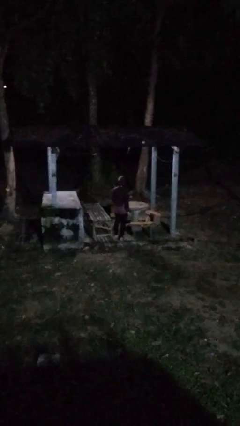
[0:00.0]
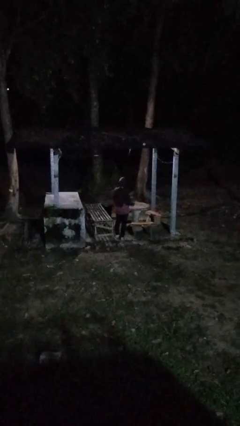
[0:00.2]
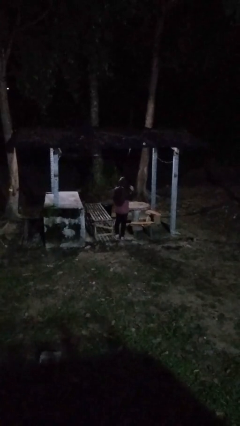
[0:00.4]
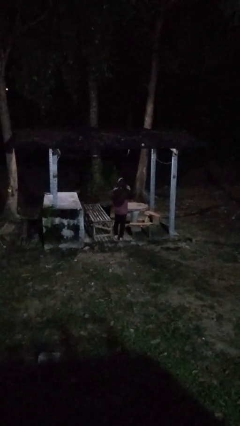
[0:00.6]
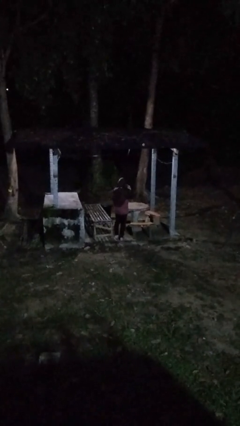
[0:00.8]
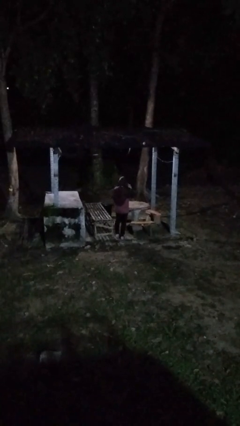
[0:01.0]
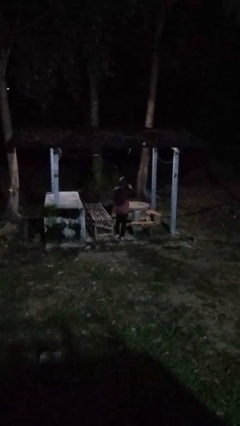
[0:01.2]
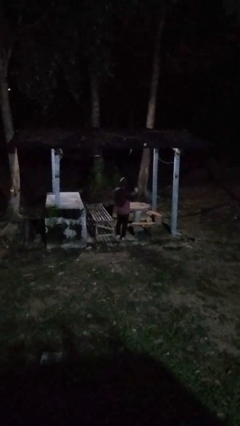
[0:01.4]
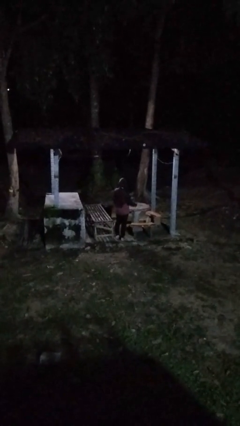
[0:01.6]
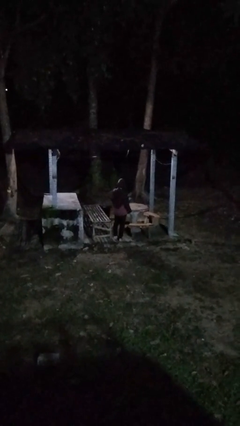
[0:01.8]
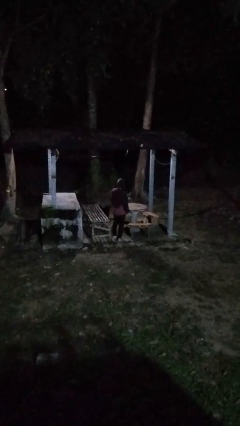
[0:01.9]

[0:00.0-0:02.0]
person gestures listen closely

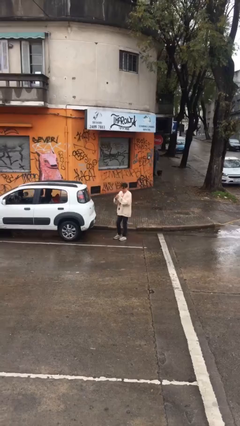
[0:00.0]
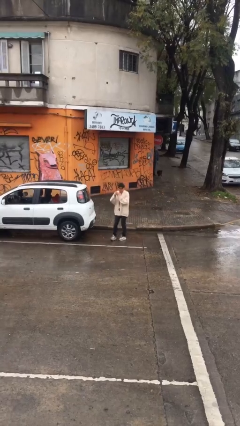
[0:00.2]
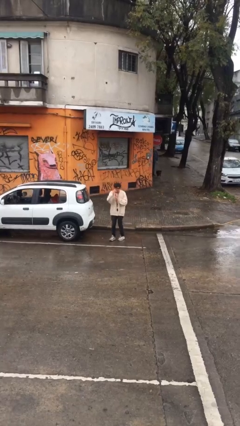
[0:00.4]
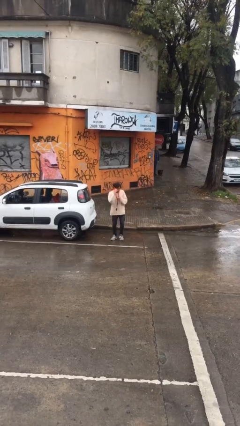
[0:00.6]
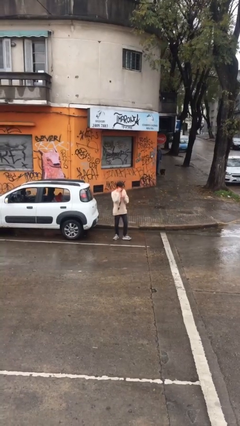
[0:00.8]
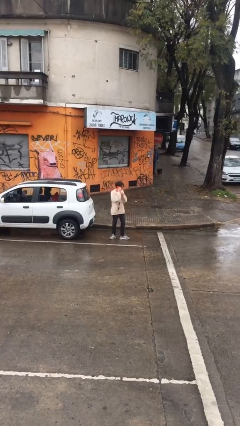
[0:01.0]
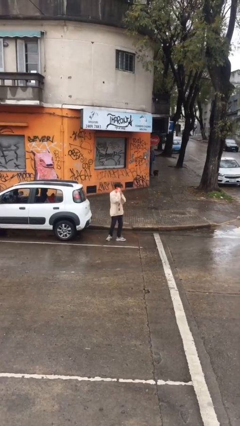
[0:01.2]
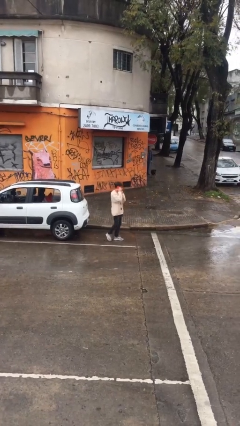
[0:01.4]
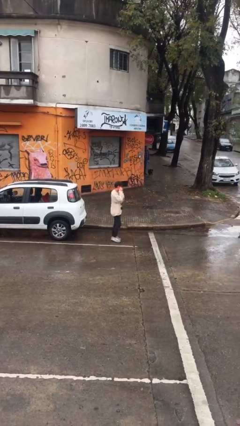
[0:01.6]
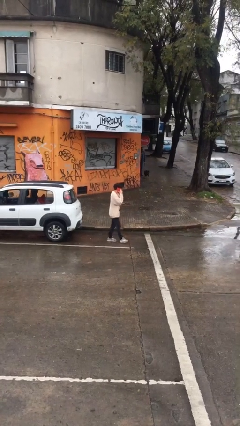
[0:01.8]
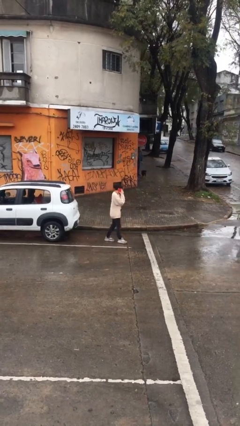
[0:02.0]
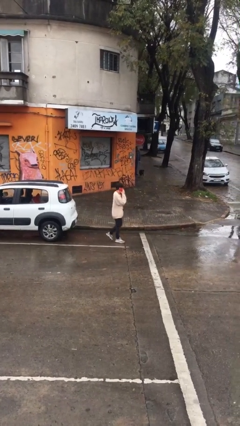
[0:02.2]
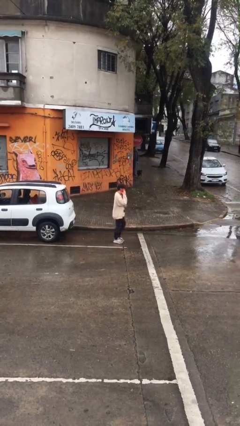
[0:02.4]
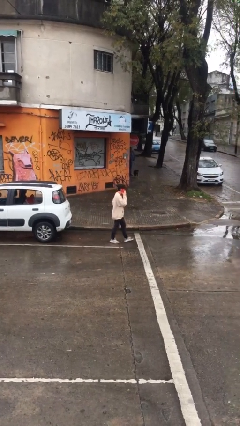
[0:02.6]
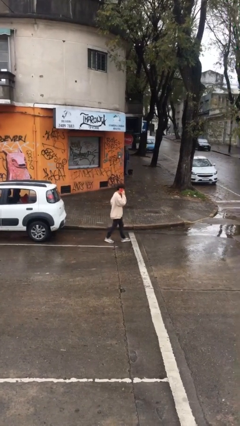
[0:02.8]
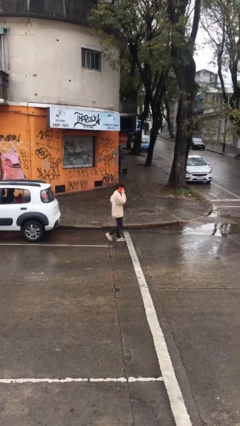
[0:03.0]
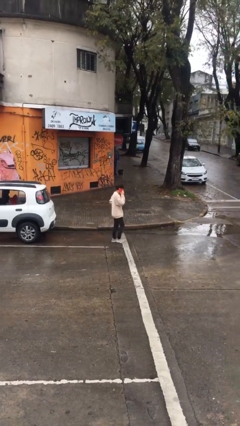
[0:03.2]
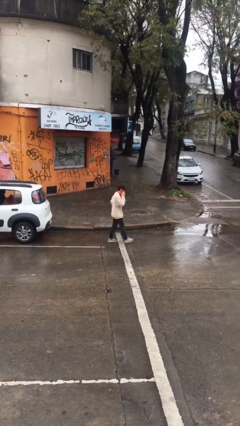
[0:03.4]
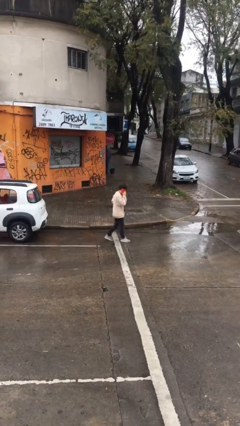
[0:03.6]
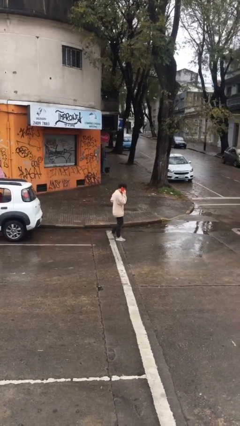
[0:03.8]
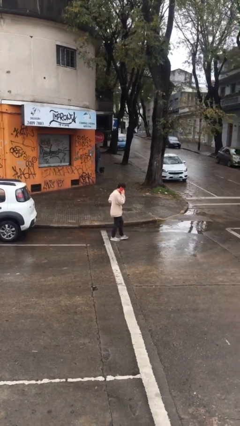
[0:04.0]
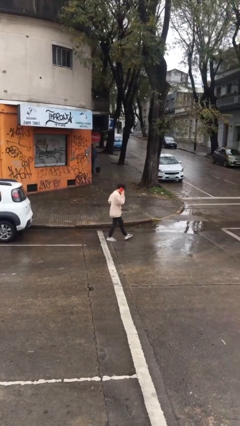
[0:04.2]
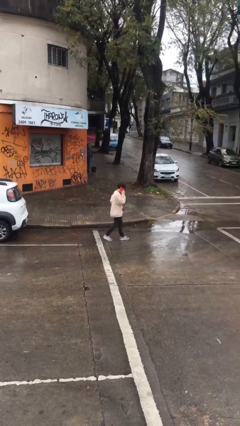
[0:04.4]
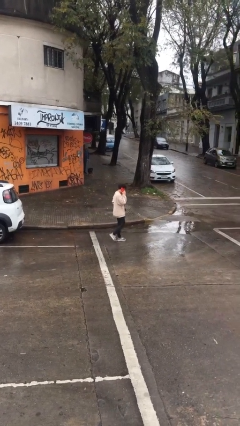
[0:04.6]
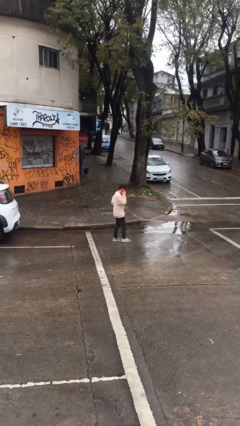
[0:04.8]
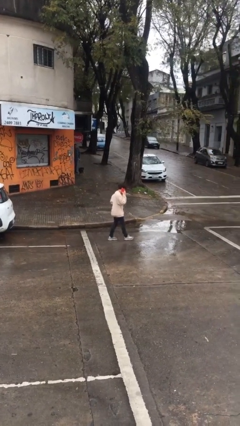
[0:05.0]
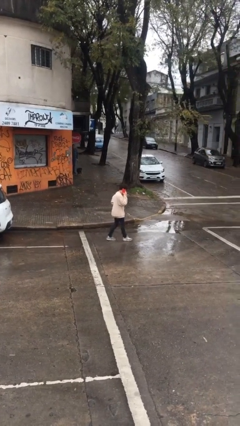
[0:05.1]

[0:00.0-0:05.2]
person talks on phone

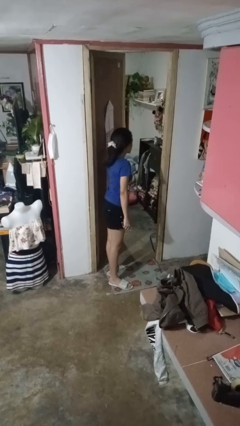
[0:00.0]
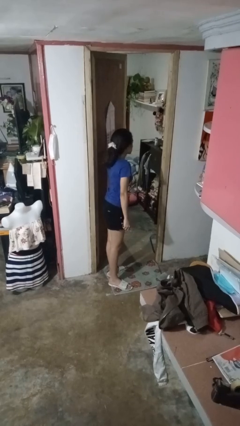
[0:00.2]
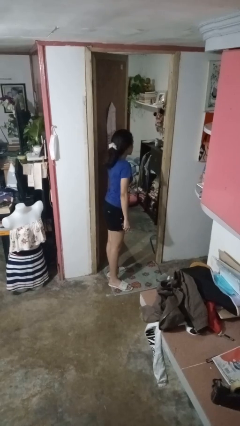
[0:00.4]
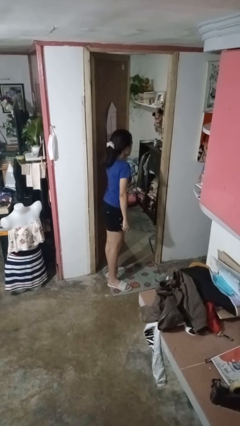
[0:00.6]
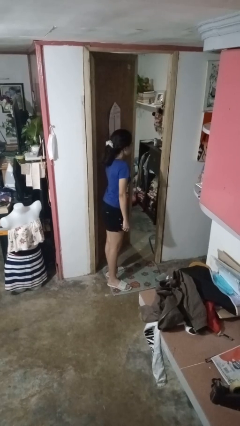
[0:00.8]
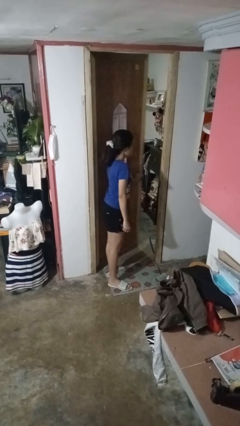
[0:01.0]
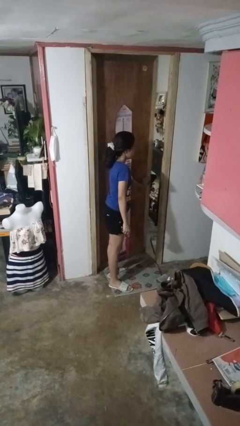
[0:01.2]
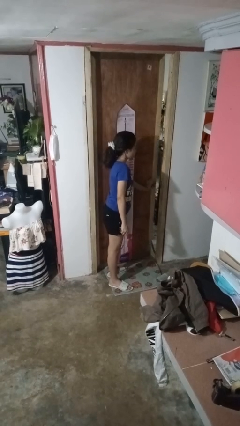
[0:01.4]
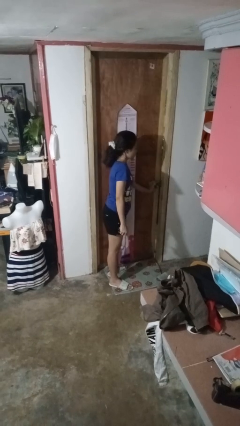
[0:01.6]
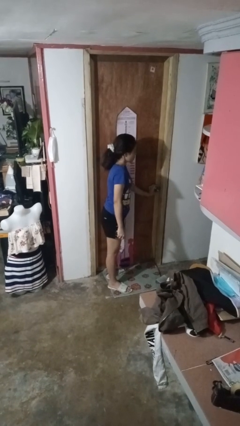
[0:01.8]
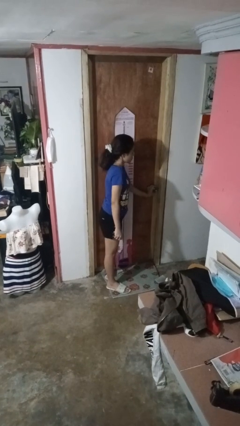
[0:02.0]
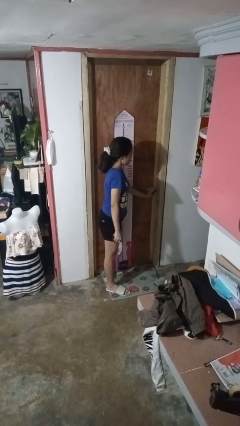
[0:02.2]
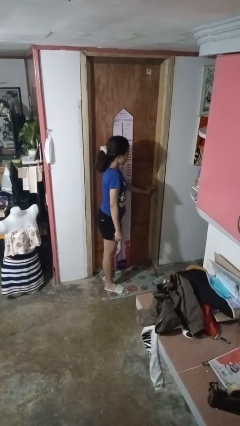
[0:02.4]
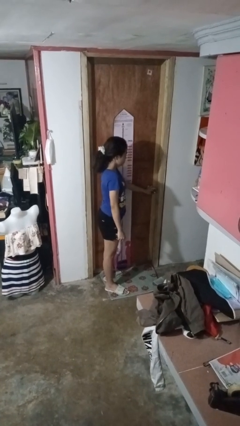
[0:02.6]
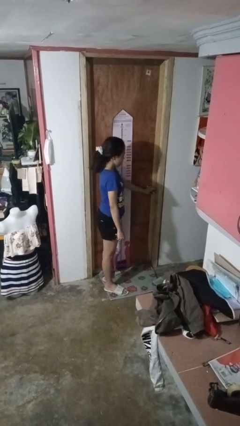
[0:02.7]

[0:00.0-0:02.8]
person closes facility door

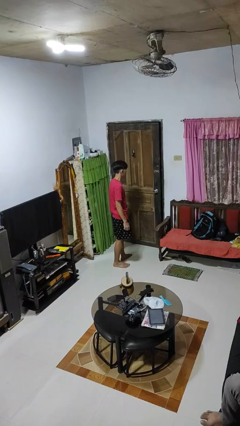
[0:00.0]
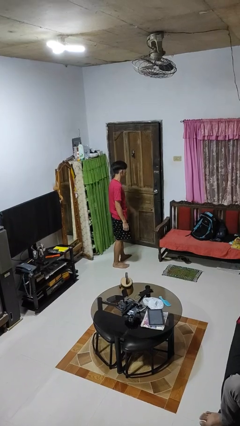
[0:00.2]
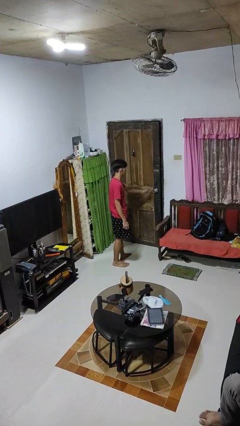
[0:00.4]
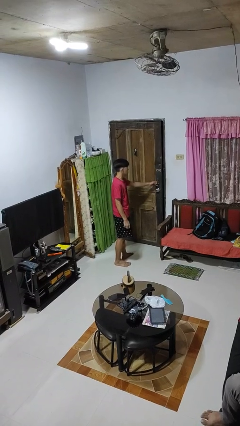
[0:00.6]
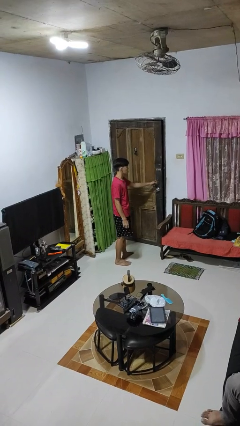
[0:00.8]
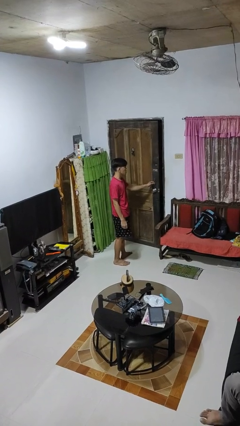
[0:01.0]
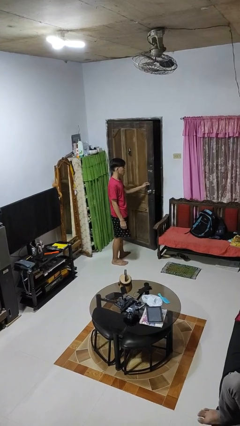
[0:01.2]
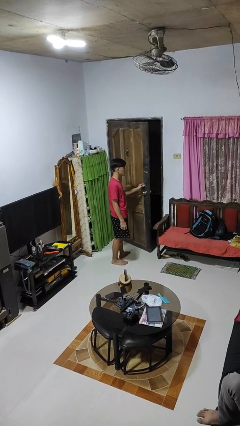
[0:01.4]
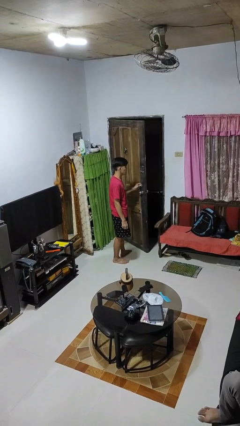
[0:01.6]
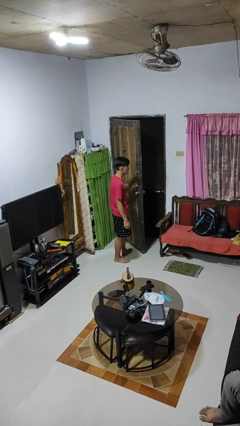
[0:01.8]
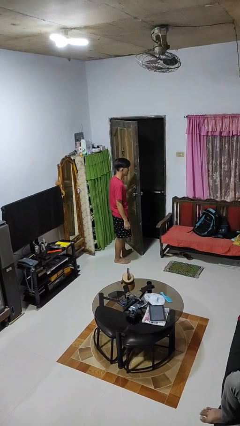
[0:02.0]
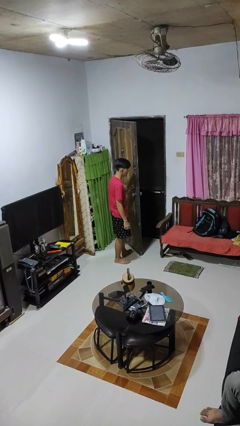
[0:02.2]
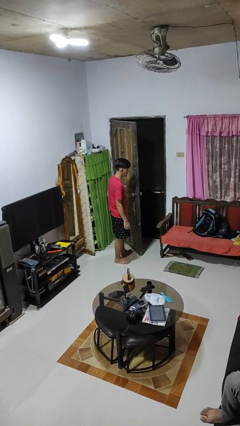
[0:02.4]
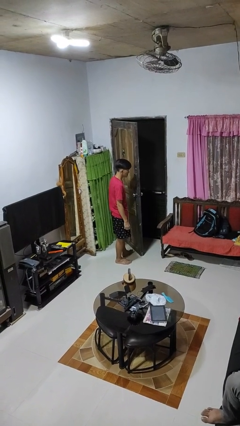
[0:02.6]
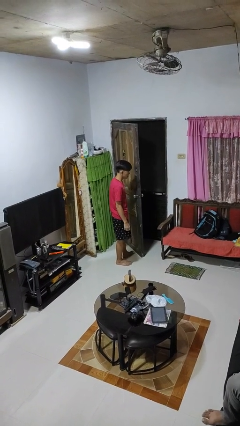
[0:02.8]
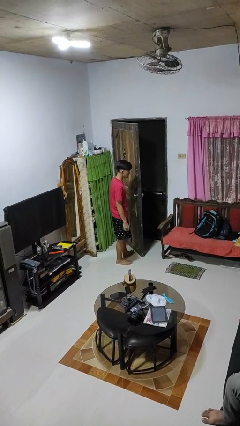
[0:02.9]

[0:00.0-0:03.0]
person opens facility door

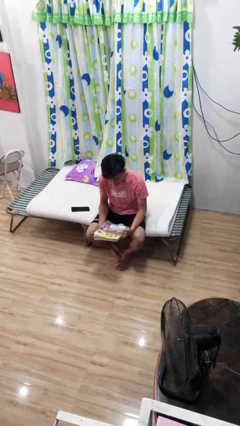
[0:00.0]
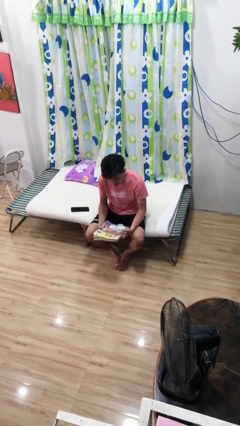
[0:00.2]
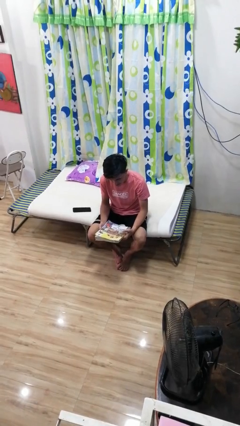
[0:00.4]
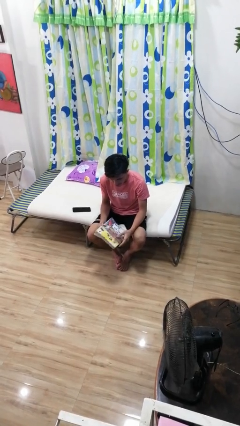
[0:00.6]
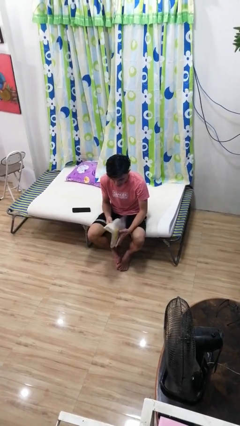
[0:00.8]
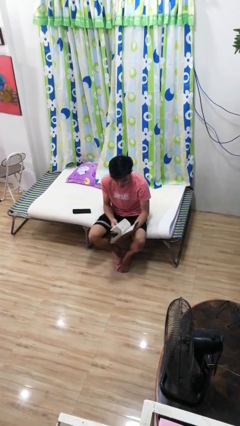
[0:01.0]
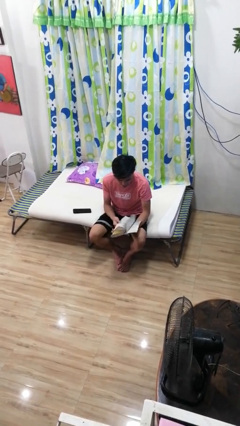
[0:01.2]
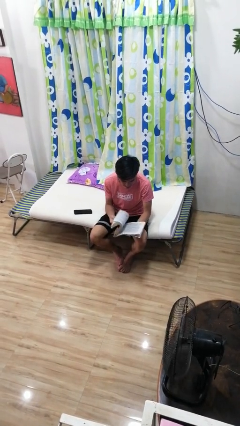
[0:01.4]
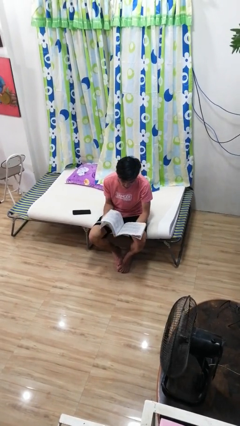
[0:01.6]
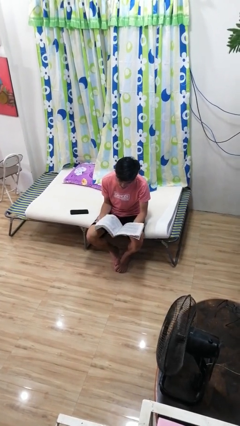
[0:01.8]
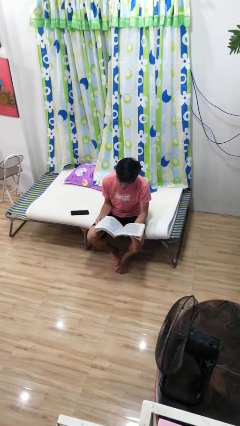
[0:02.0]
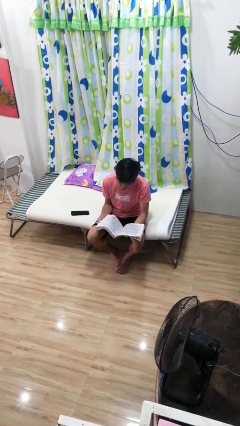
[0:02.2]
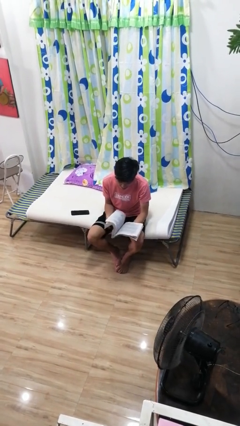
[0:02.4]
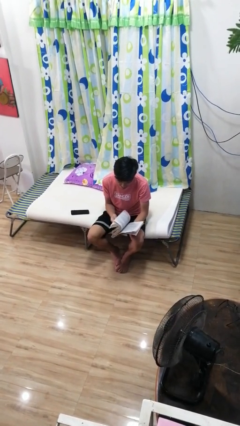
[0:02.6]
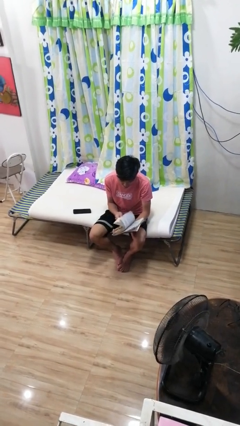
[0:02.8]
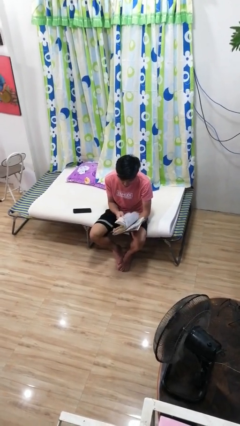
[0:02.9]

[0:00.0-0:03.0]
person reads book

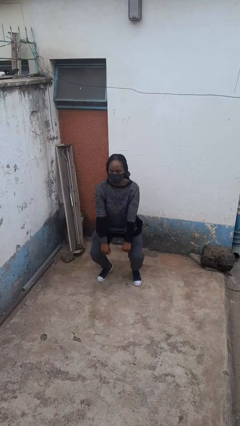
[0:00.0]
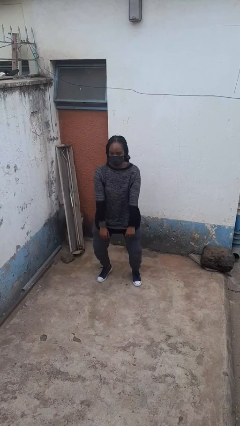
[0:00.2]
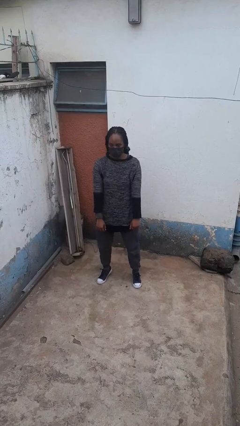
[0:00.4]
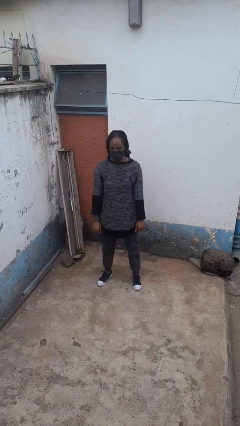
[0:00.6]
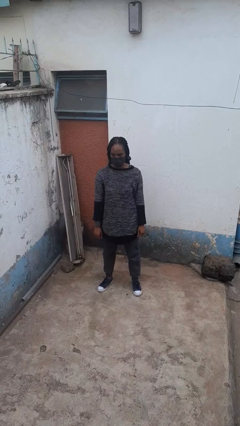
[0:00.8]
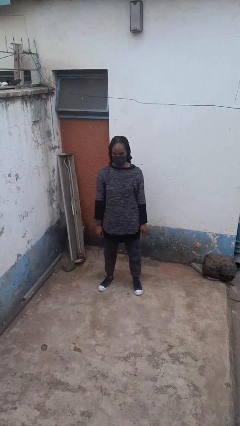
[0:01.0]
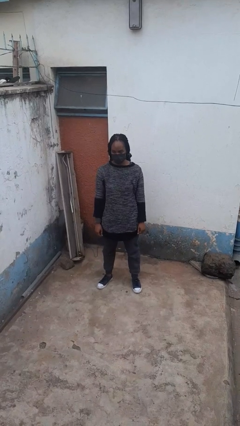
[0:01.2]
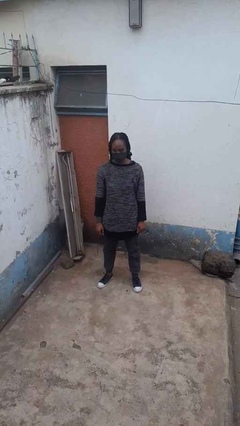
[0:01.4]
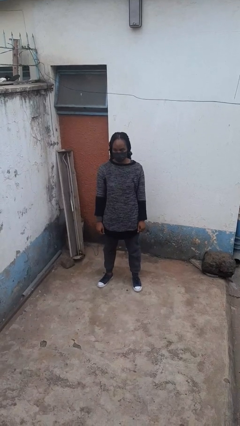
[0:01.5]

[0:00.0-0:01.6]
person stands up
